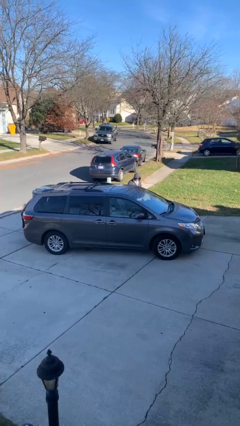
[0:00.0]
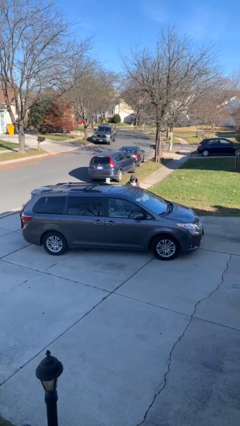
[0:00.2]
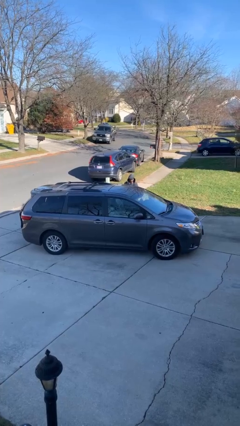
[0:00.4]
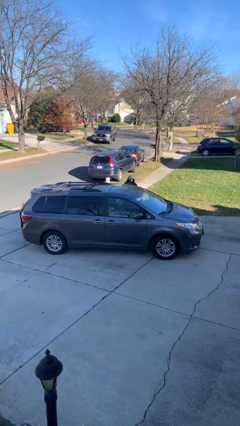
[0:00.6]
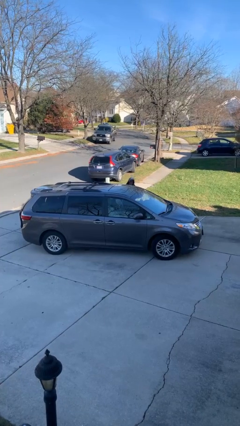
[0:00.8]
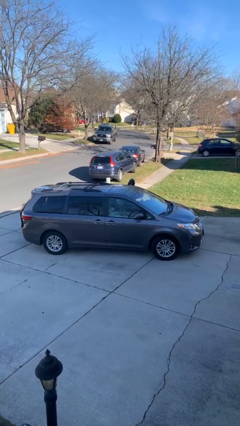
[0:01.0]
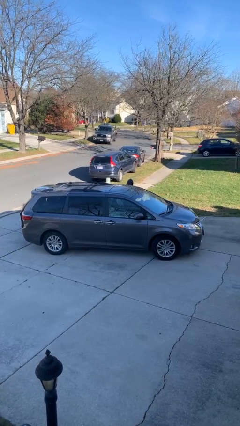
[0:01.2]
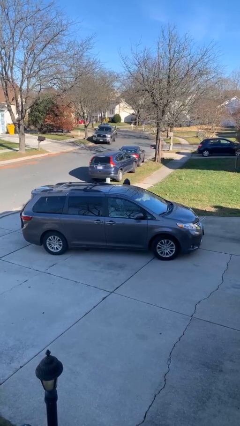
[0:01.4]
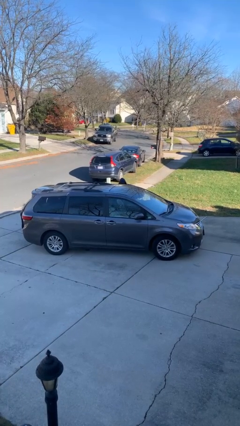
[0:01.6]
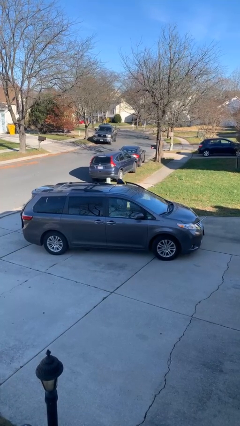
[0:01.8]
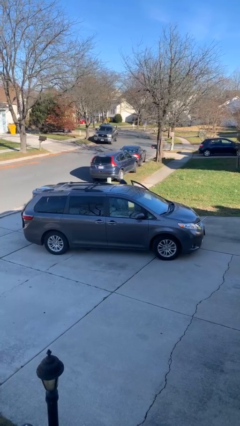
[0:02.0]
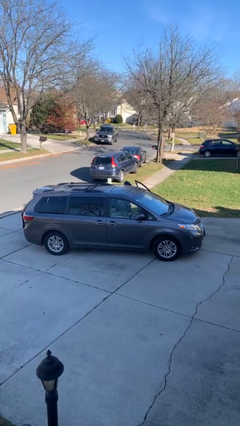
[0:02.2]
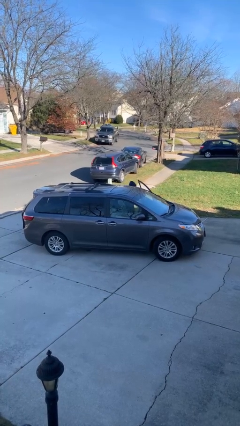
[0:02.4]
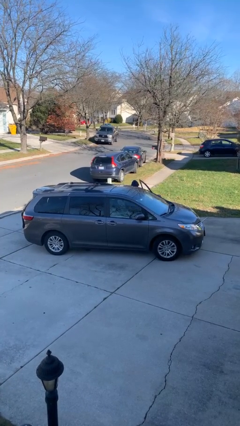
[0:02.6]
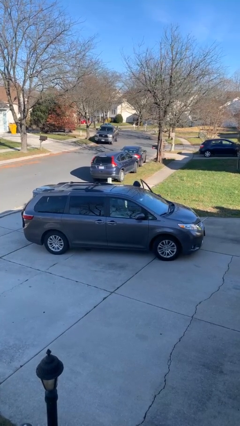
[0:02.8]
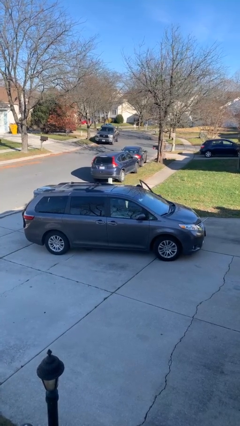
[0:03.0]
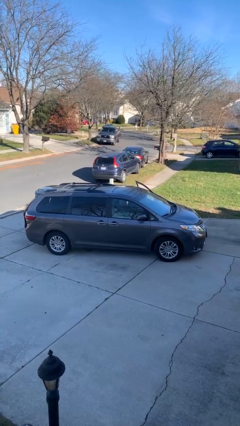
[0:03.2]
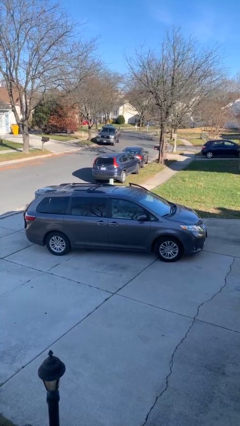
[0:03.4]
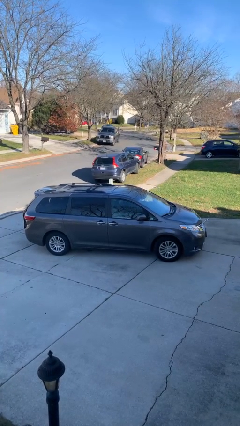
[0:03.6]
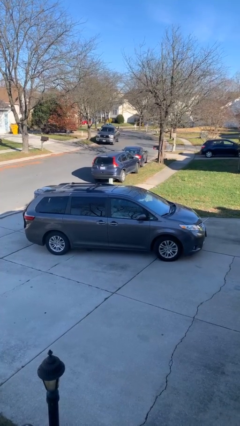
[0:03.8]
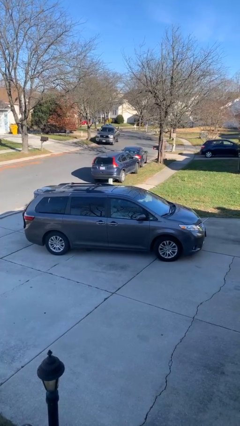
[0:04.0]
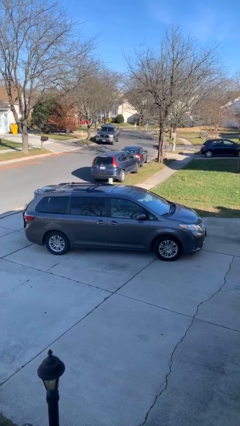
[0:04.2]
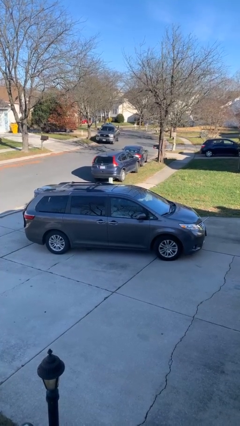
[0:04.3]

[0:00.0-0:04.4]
car picks up person

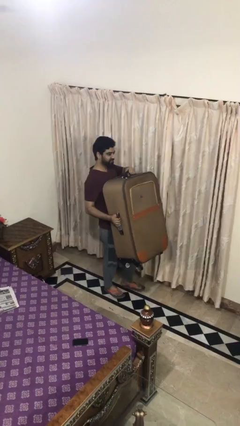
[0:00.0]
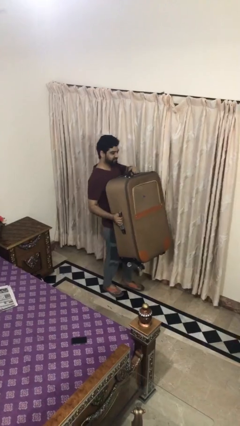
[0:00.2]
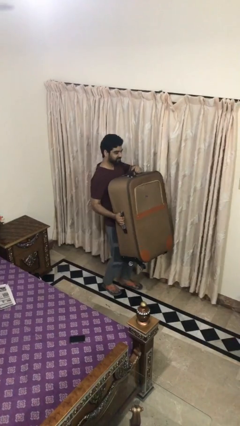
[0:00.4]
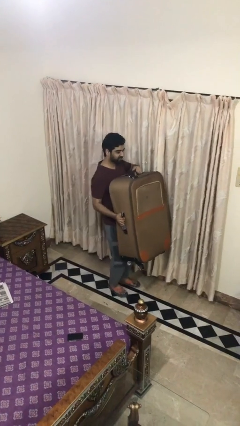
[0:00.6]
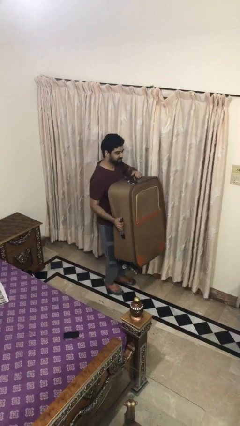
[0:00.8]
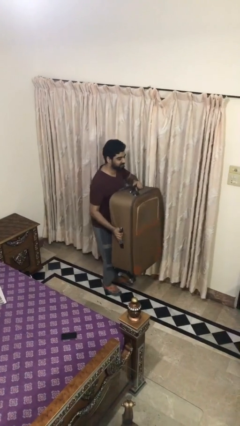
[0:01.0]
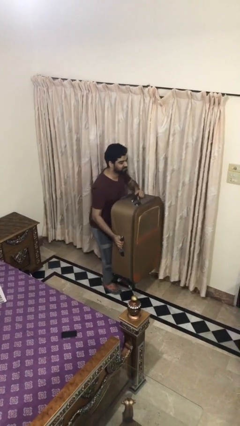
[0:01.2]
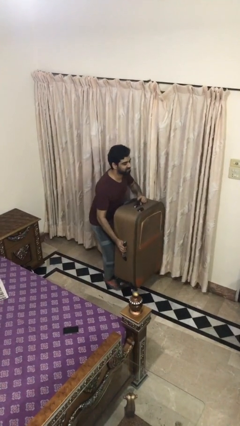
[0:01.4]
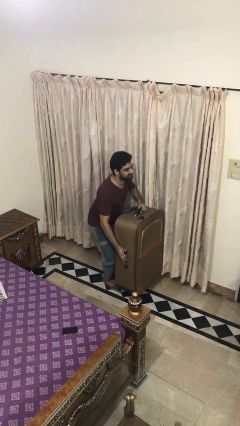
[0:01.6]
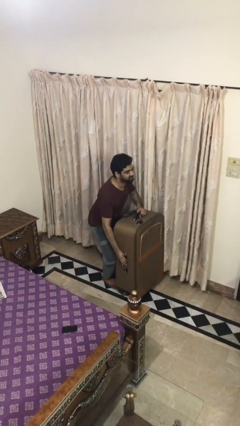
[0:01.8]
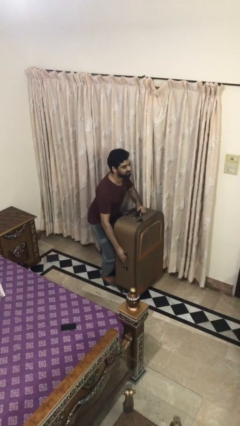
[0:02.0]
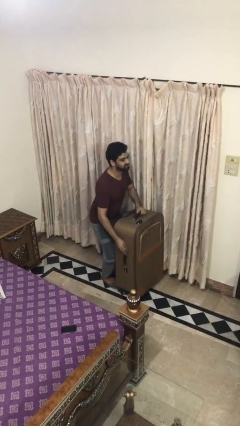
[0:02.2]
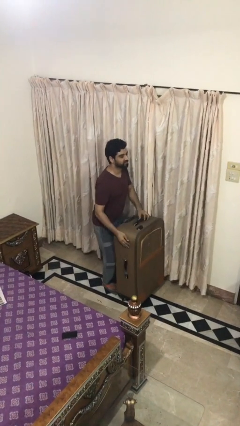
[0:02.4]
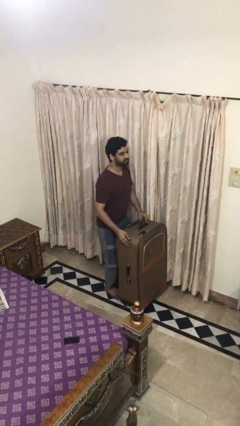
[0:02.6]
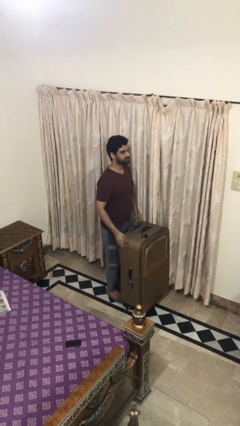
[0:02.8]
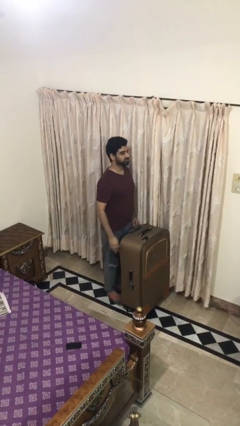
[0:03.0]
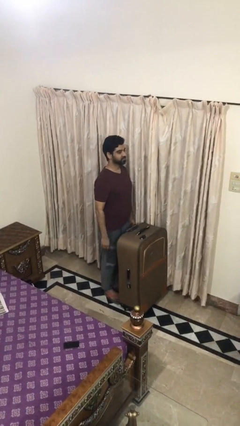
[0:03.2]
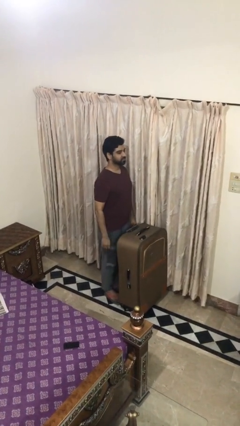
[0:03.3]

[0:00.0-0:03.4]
person puts down object on floor

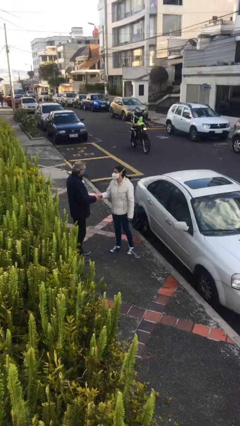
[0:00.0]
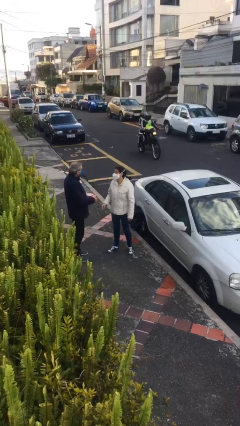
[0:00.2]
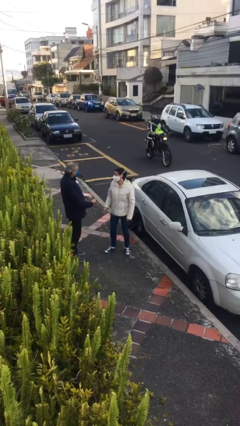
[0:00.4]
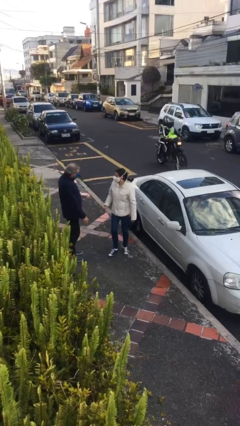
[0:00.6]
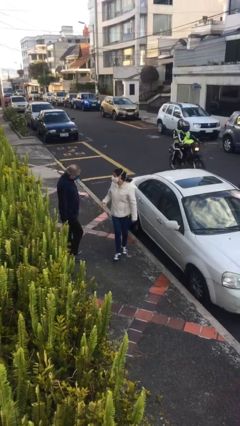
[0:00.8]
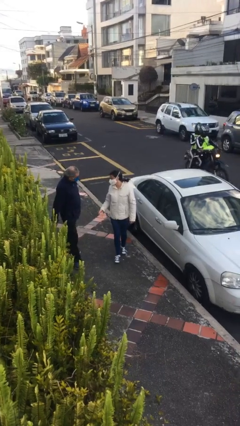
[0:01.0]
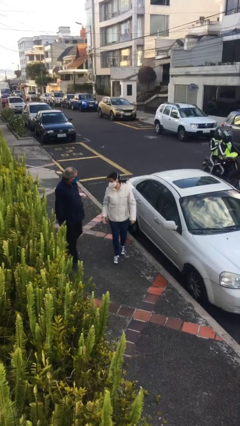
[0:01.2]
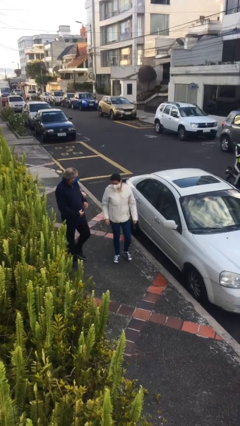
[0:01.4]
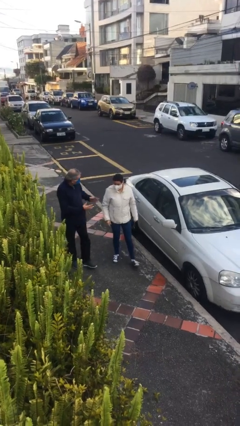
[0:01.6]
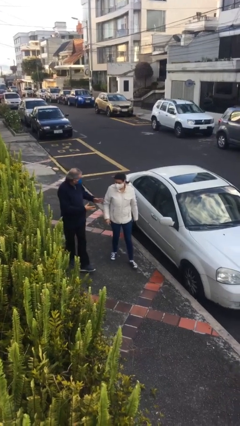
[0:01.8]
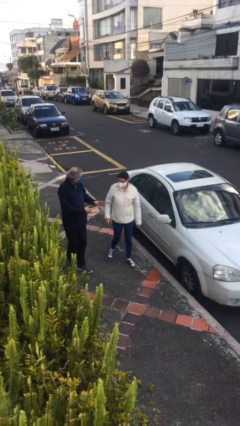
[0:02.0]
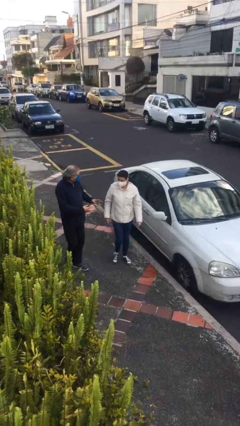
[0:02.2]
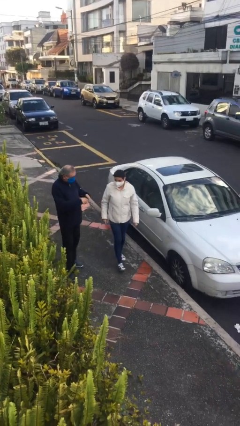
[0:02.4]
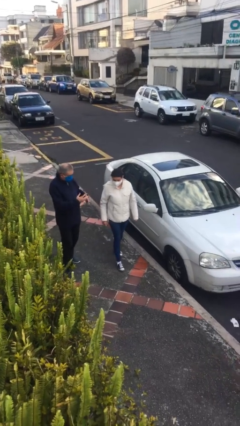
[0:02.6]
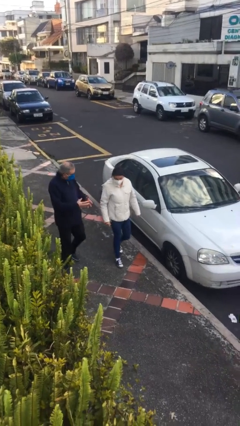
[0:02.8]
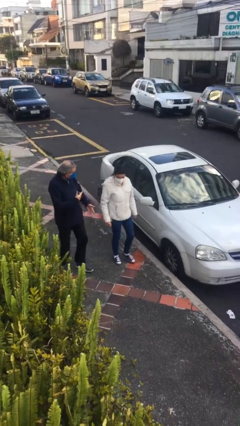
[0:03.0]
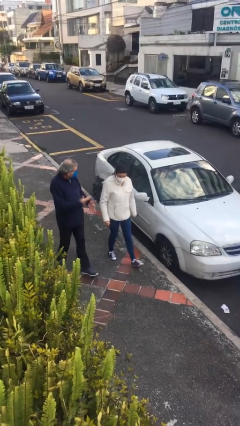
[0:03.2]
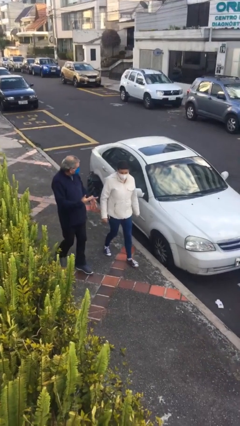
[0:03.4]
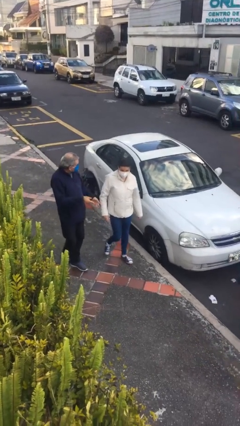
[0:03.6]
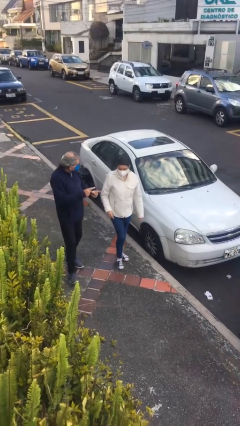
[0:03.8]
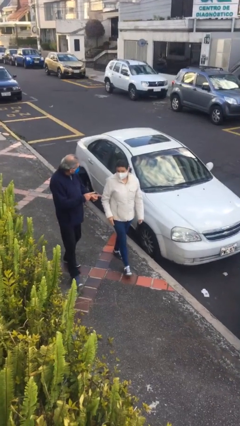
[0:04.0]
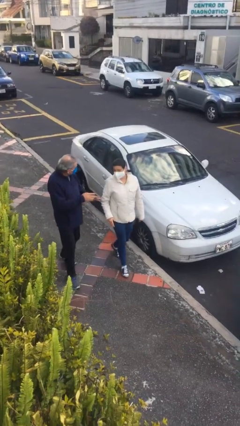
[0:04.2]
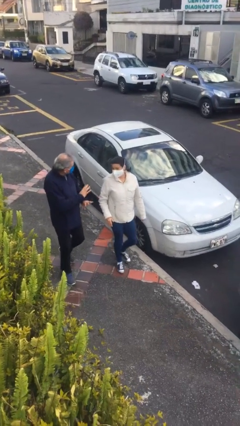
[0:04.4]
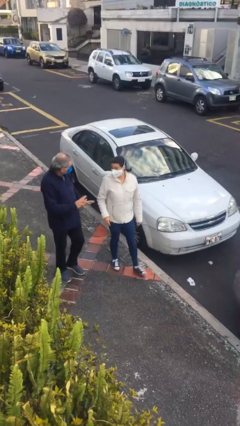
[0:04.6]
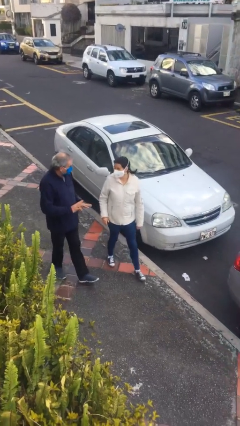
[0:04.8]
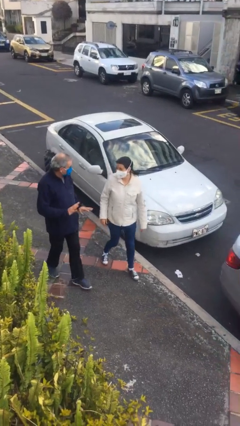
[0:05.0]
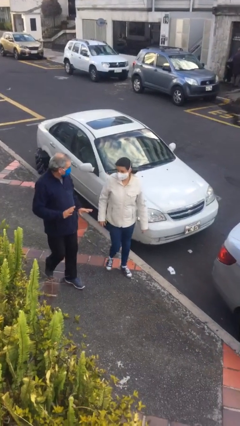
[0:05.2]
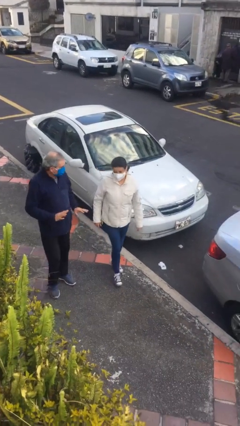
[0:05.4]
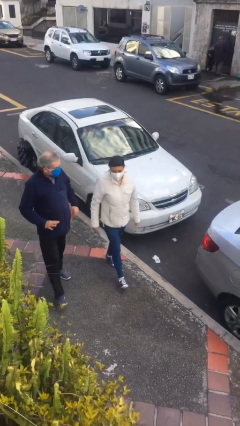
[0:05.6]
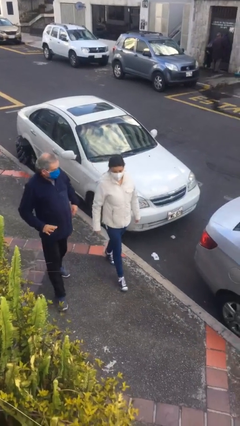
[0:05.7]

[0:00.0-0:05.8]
person talks to person

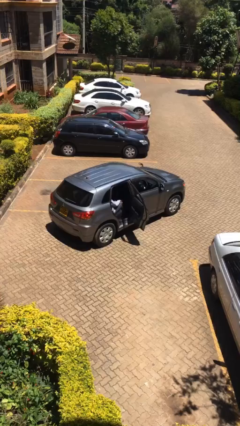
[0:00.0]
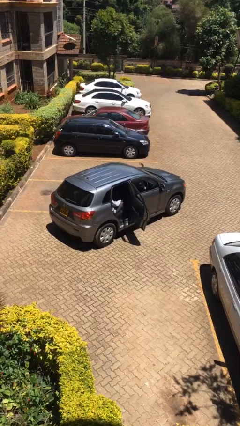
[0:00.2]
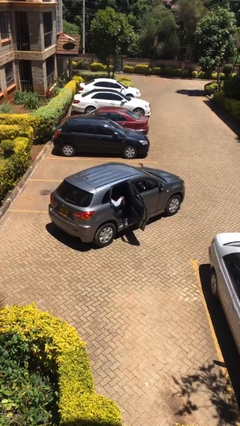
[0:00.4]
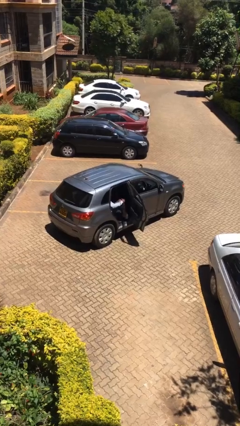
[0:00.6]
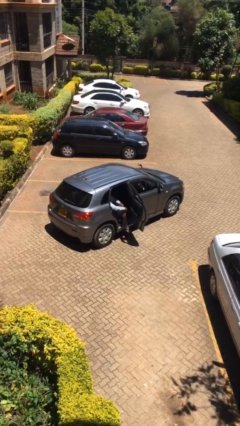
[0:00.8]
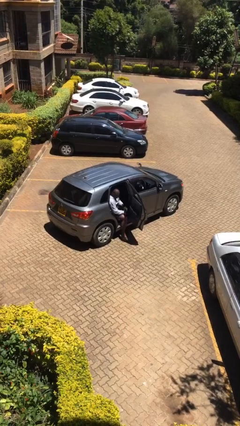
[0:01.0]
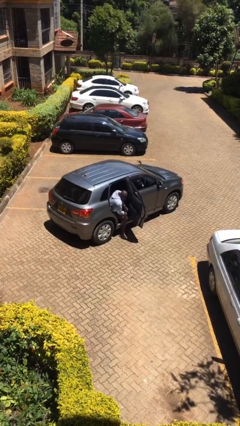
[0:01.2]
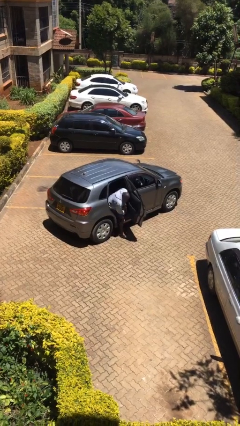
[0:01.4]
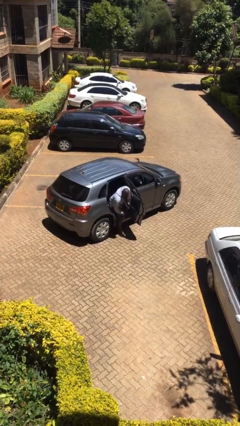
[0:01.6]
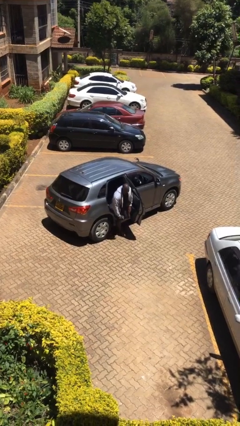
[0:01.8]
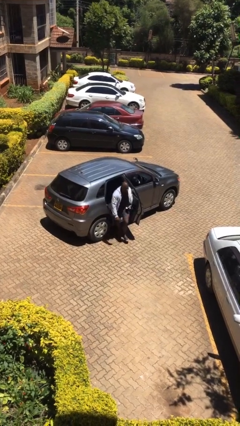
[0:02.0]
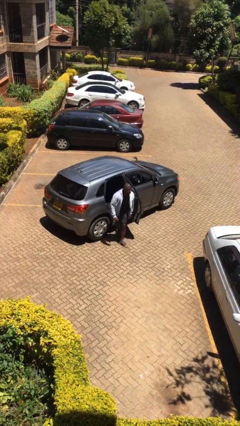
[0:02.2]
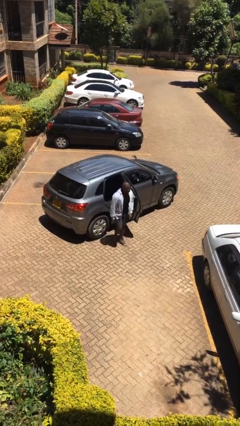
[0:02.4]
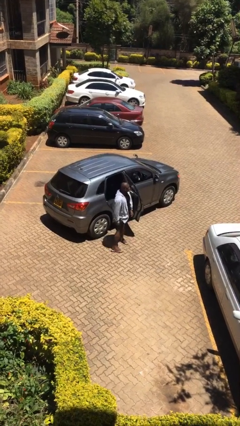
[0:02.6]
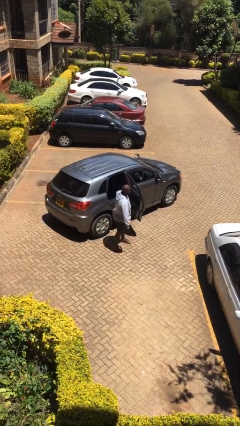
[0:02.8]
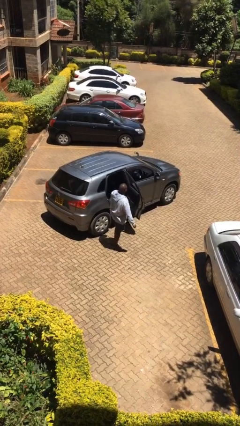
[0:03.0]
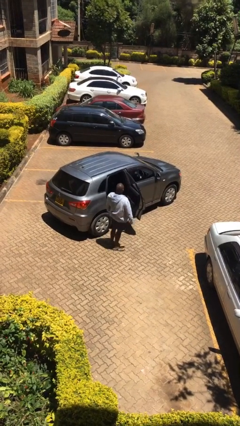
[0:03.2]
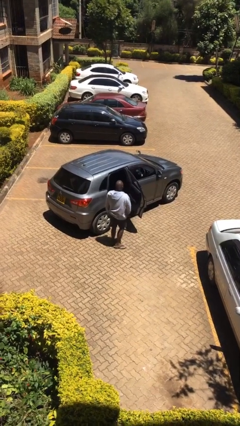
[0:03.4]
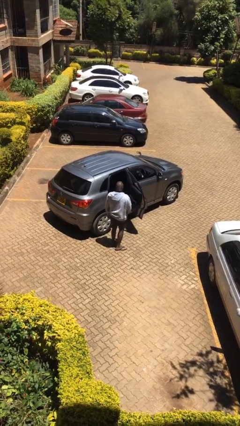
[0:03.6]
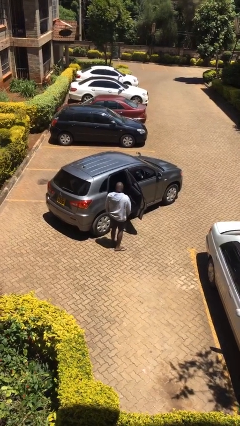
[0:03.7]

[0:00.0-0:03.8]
person exits car
